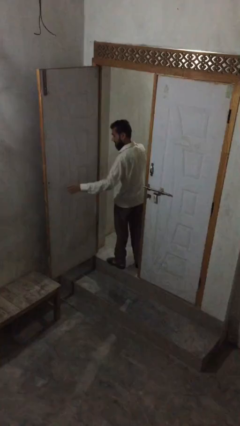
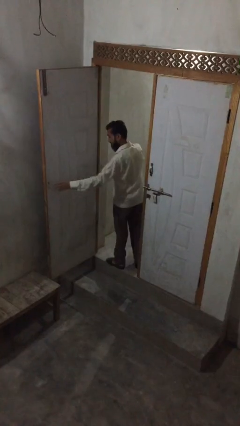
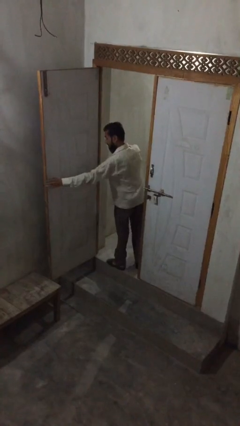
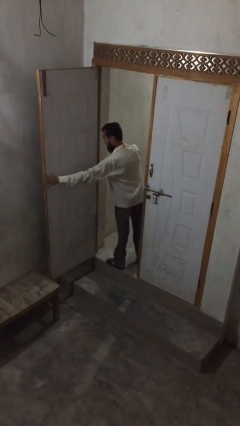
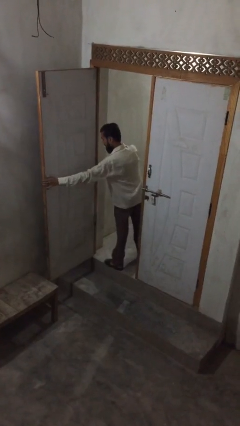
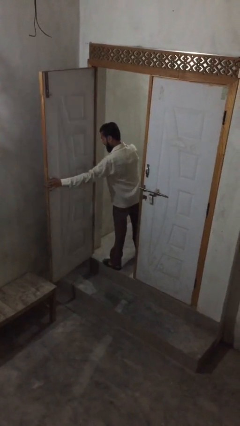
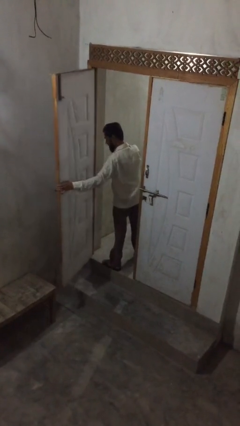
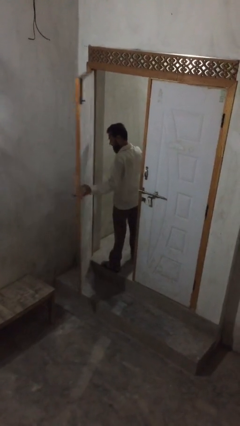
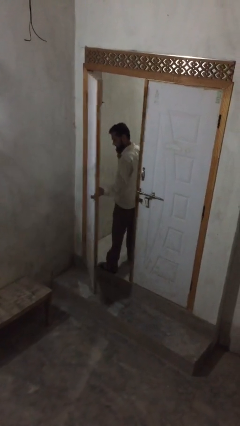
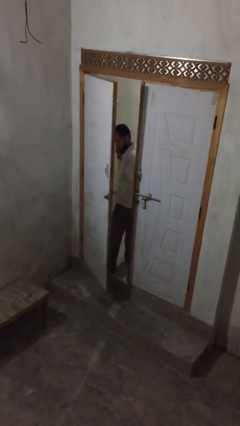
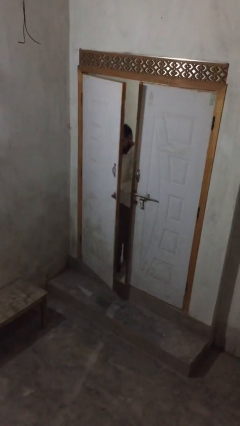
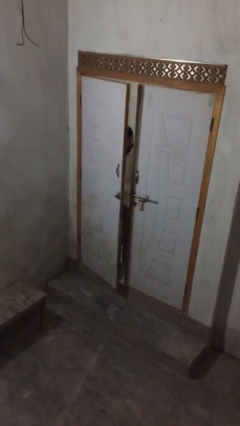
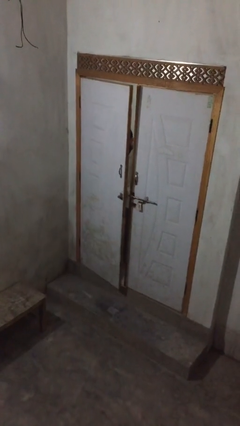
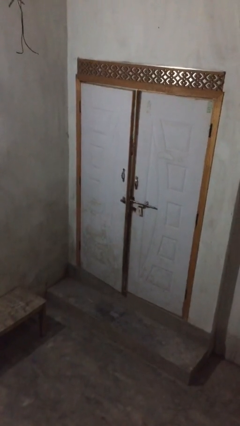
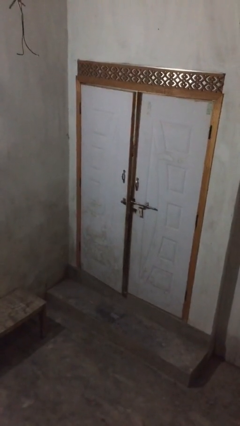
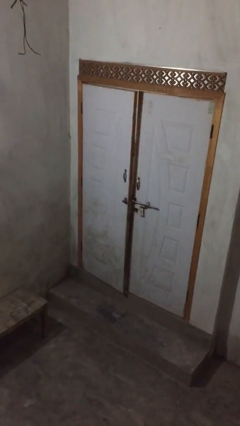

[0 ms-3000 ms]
person closes facility door

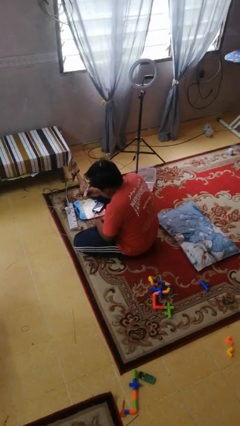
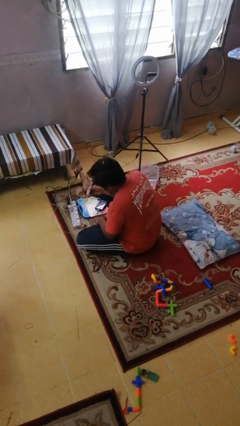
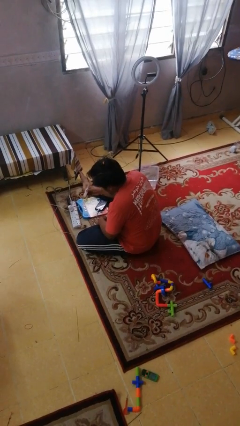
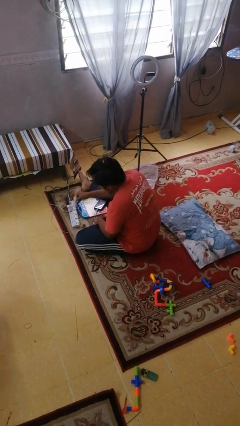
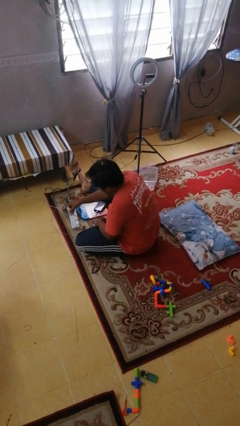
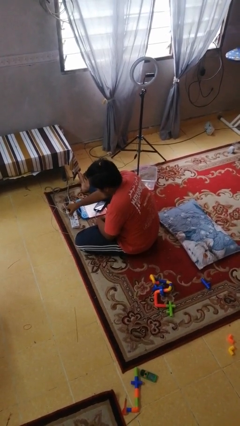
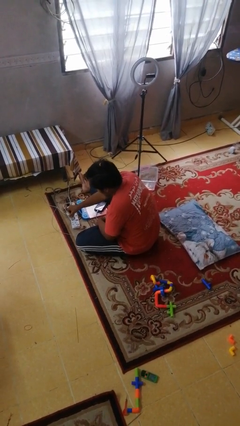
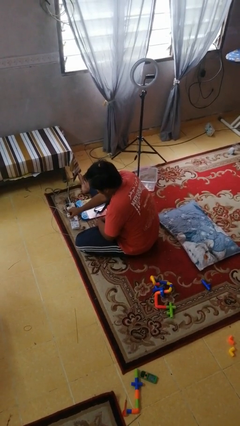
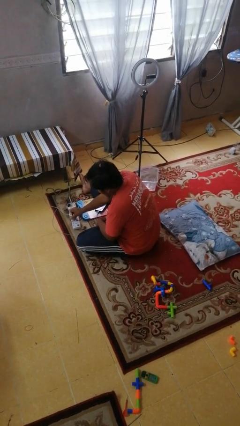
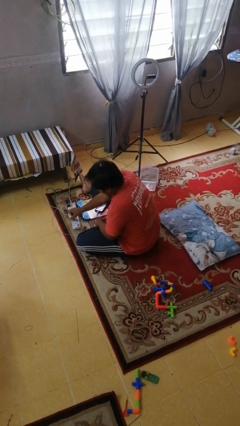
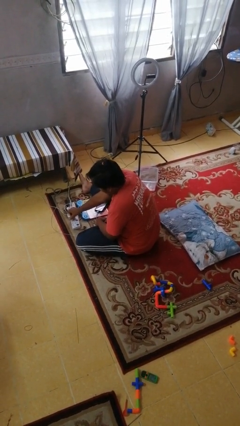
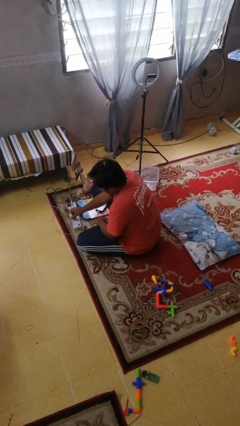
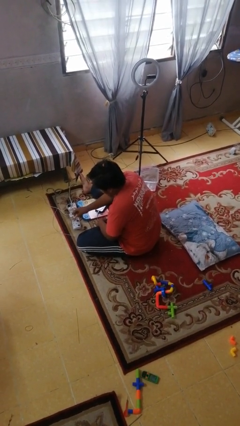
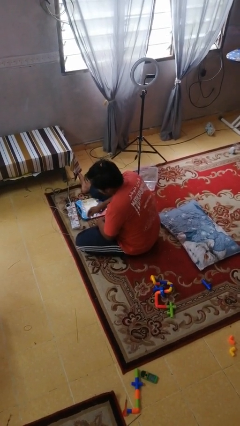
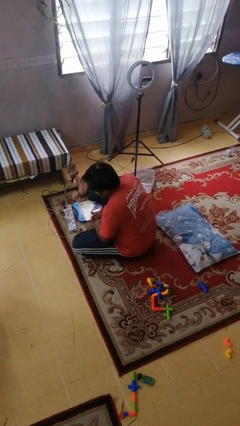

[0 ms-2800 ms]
person plugs into electrical socket

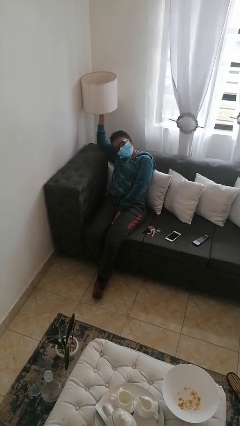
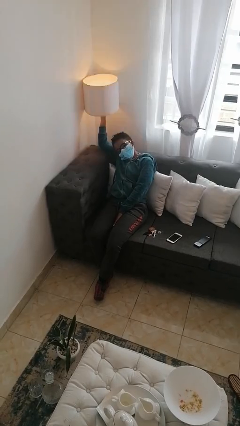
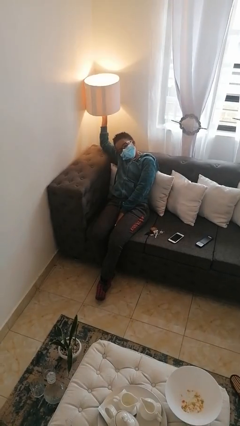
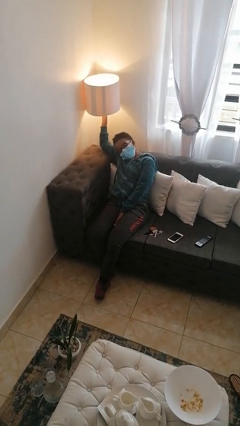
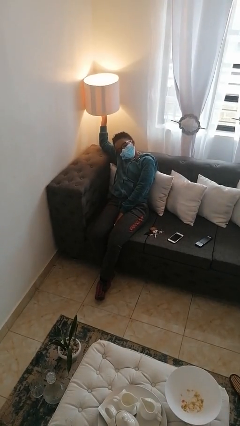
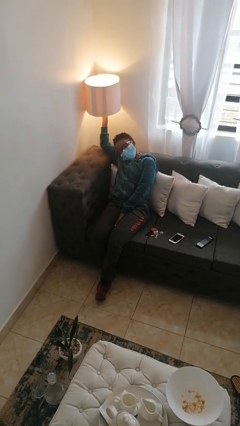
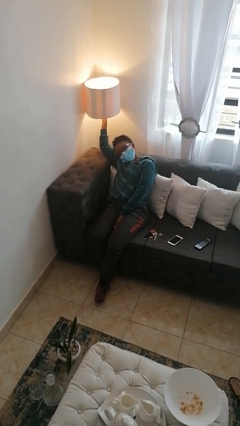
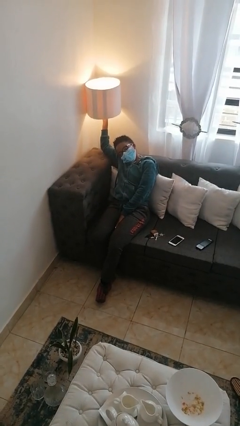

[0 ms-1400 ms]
person turns on lamp

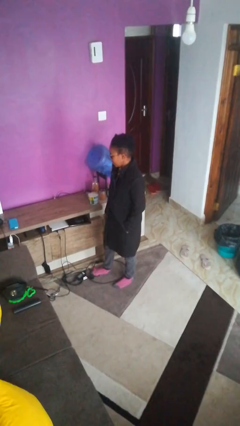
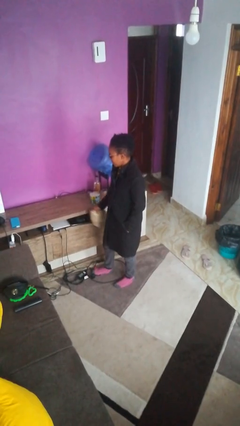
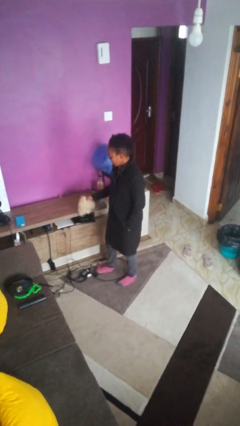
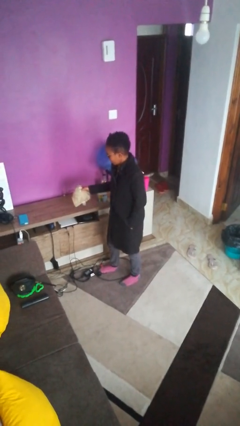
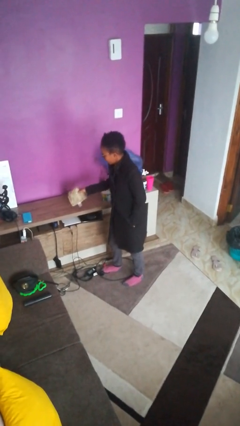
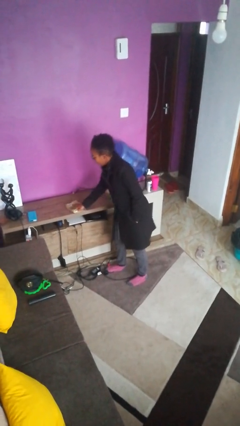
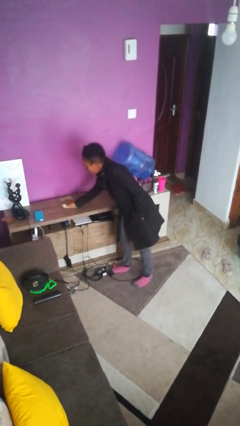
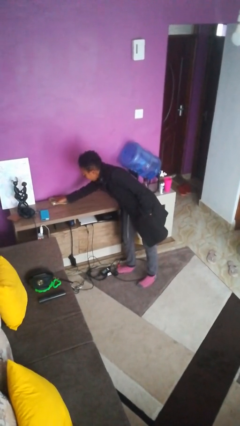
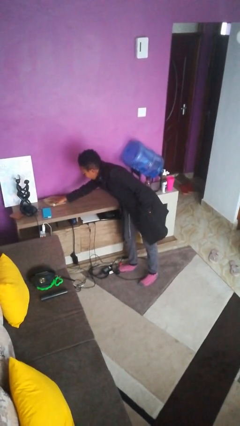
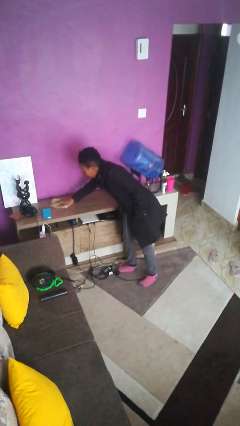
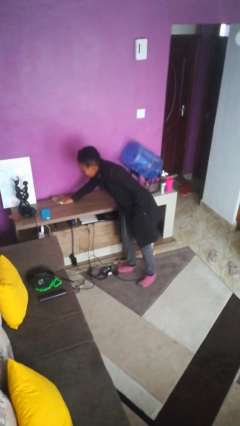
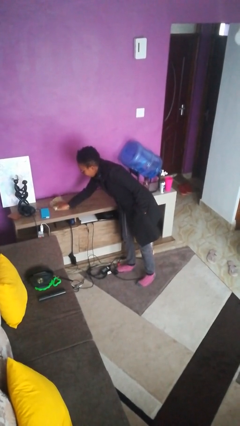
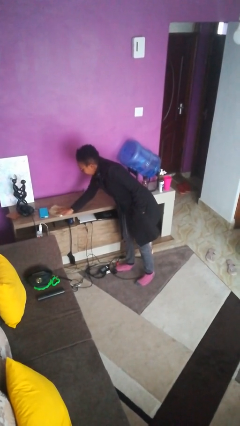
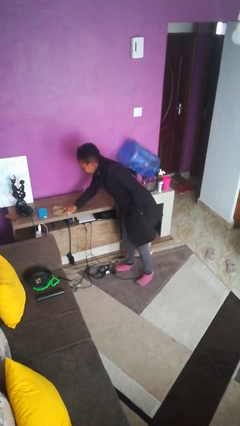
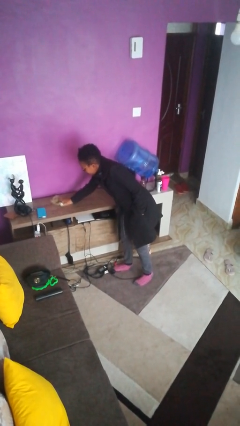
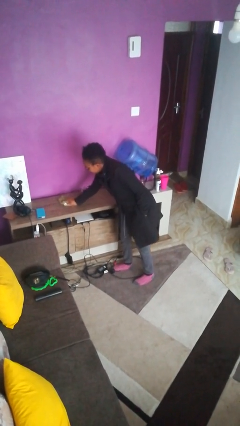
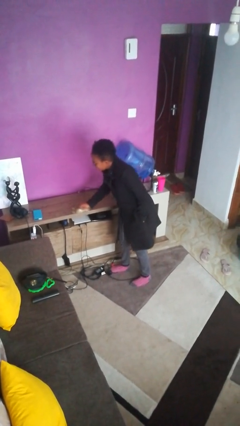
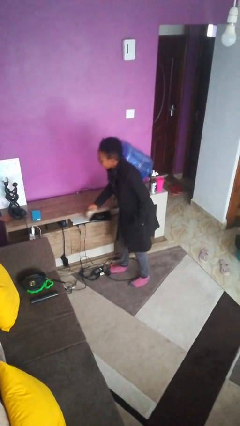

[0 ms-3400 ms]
person cleans table with rag

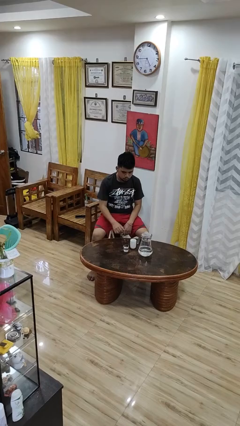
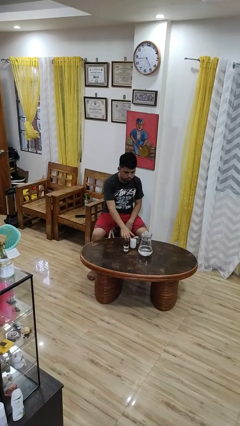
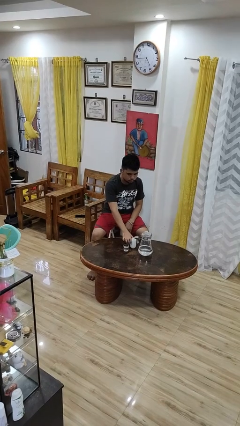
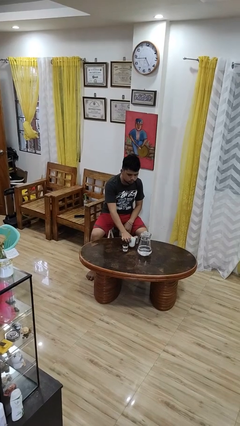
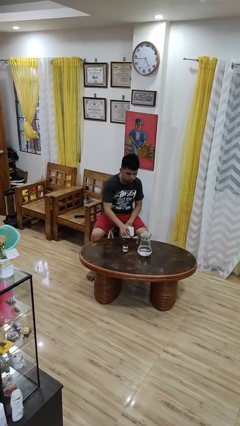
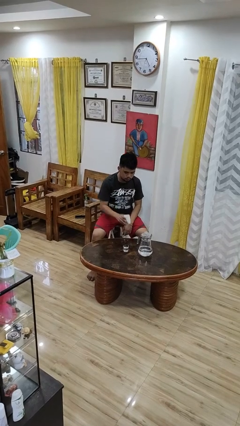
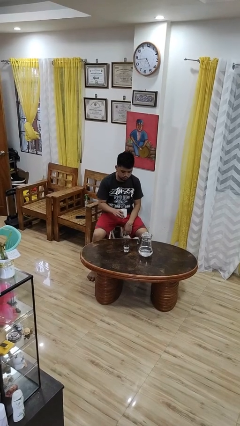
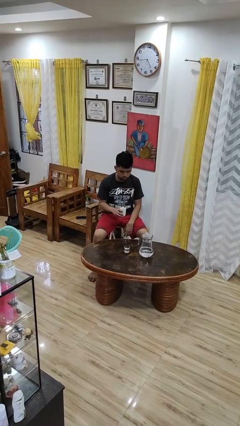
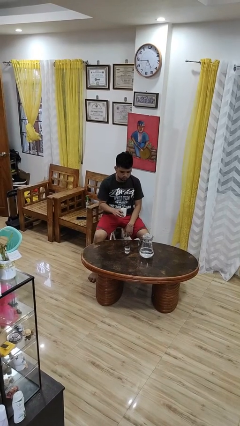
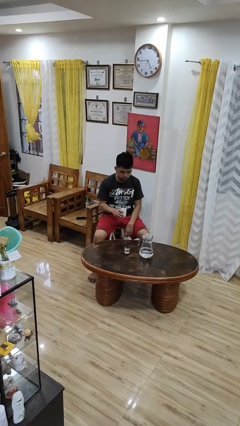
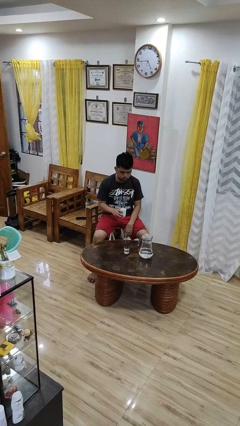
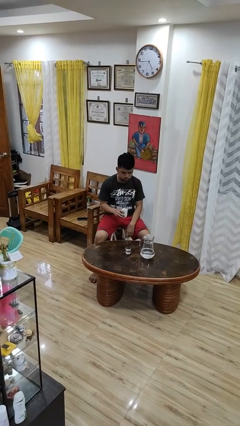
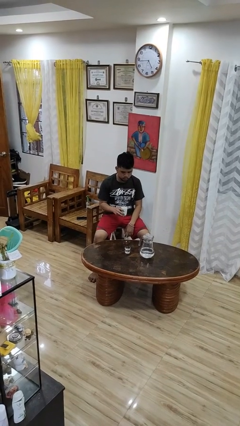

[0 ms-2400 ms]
person picks up object from table

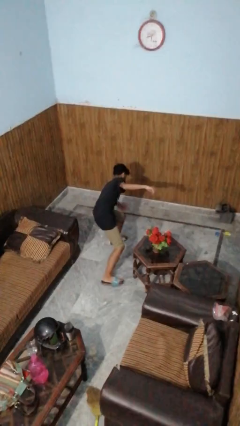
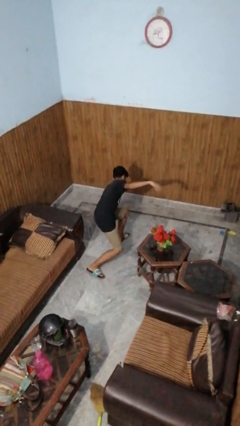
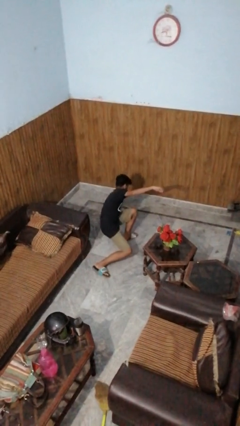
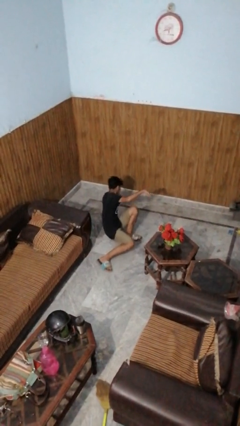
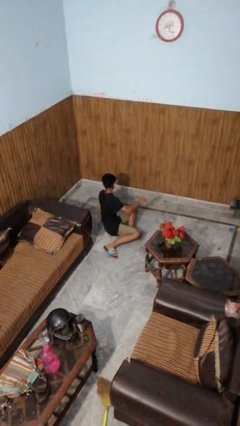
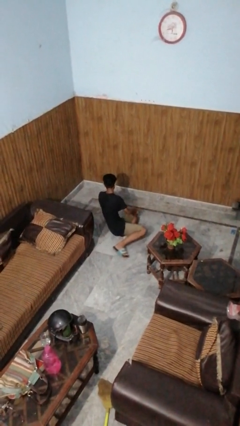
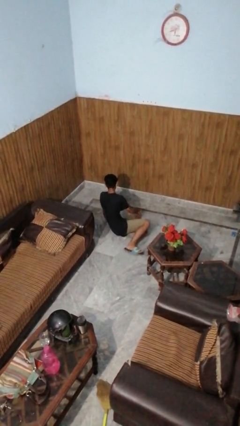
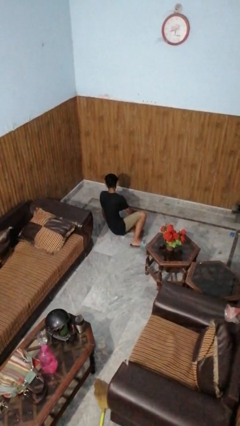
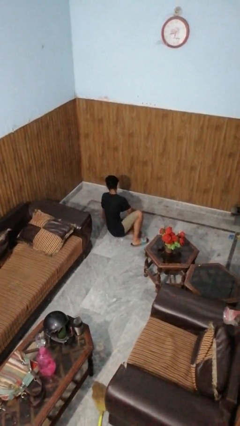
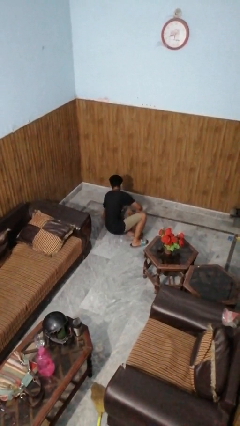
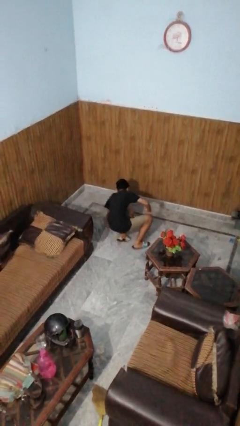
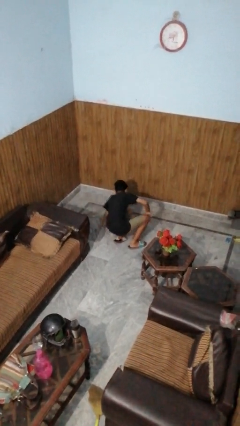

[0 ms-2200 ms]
person lies down on floor

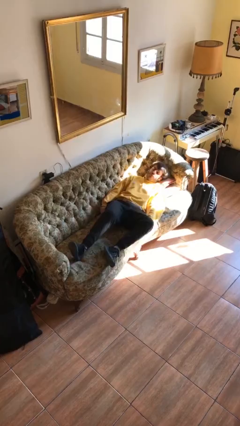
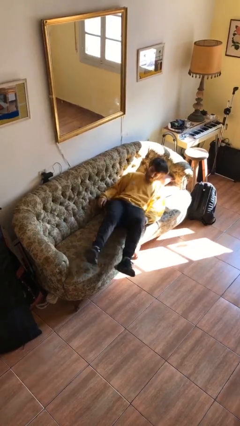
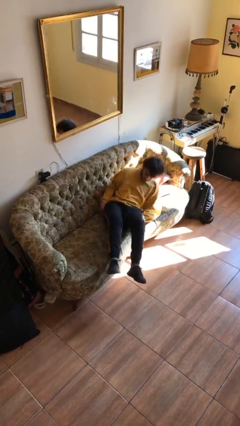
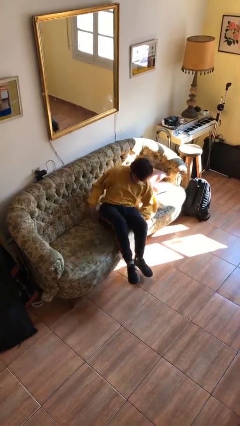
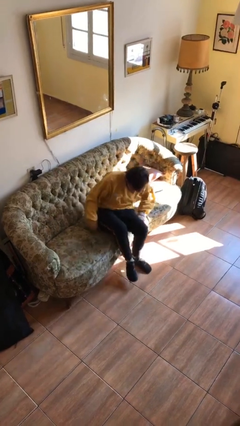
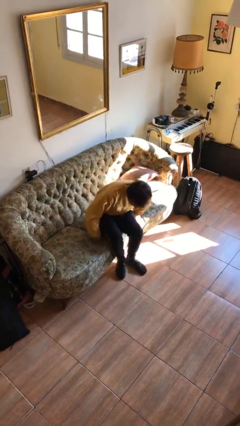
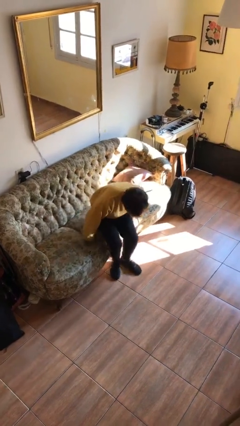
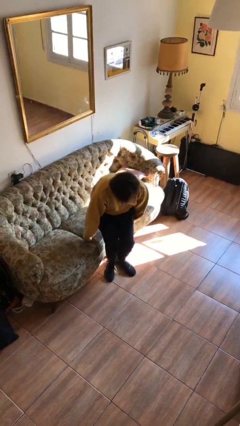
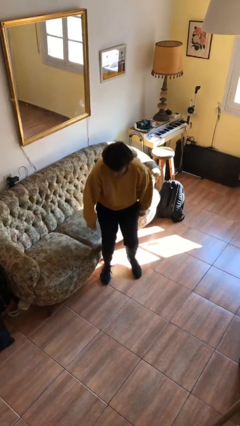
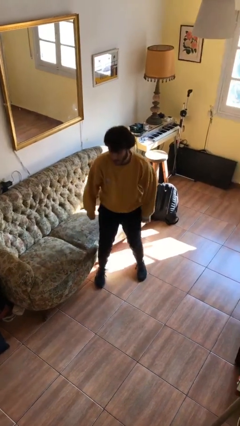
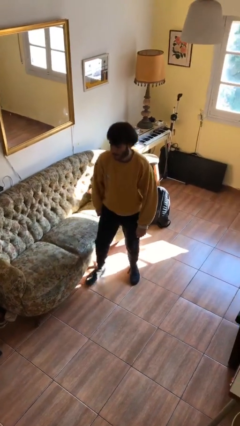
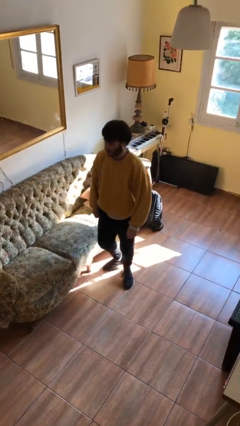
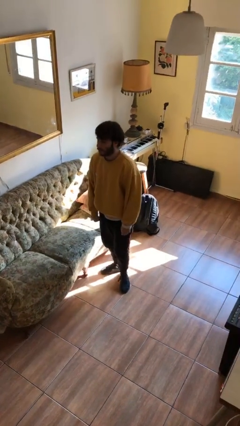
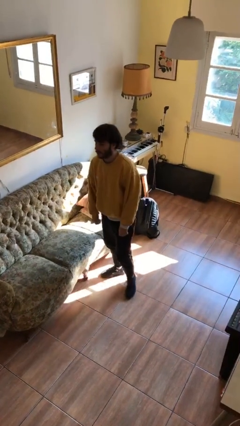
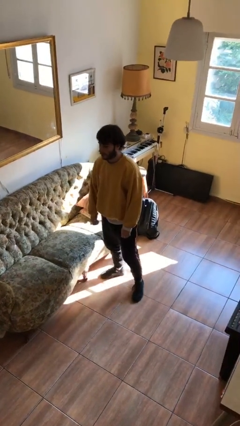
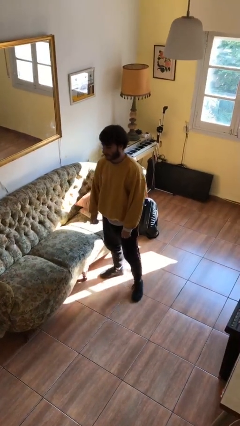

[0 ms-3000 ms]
person stands up
